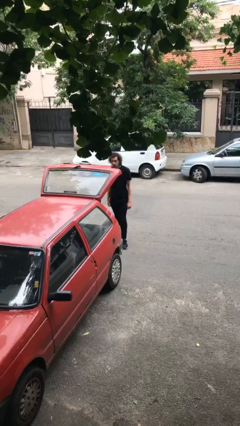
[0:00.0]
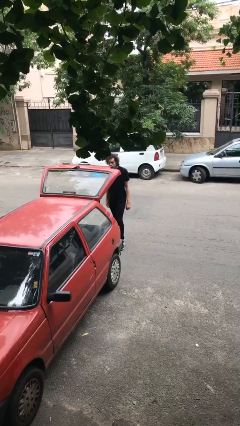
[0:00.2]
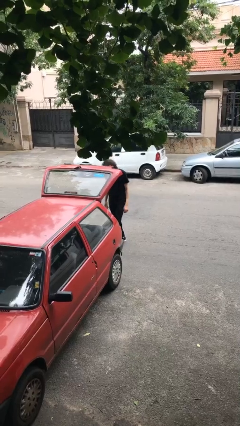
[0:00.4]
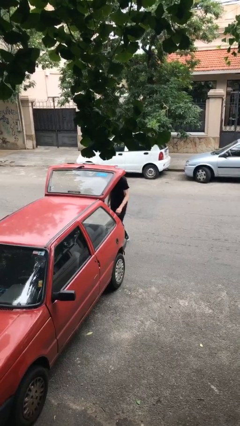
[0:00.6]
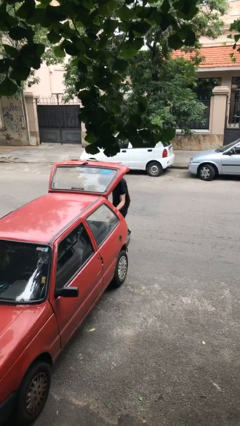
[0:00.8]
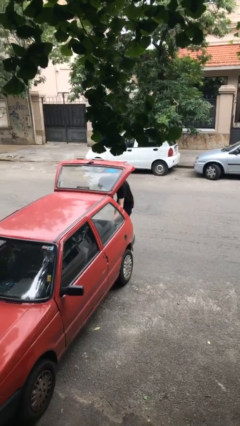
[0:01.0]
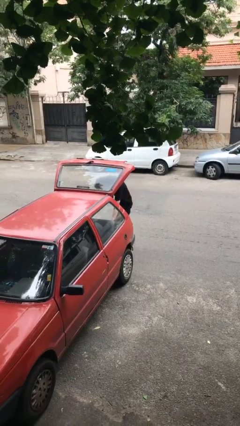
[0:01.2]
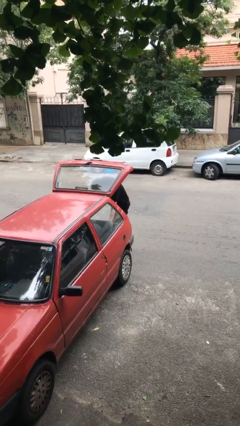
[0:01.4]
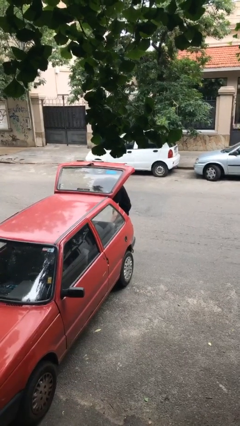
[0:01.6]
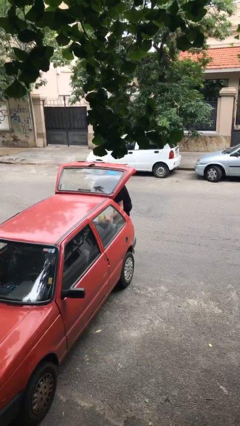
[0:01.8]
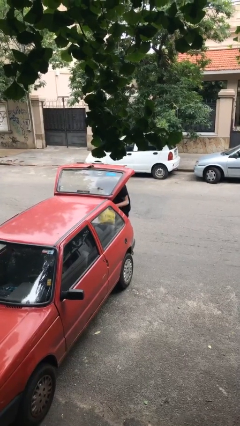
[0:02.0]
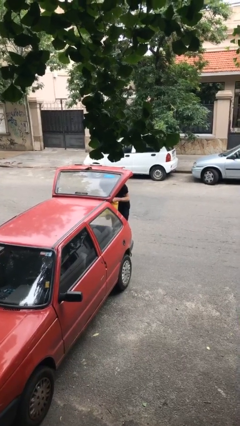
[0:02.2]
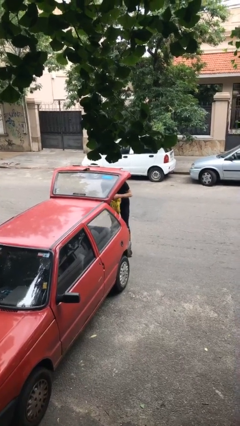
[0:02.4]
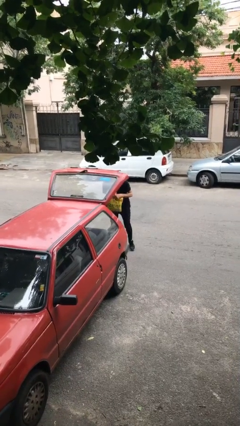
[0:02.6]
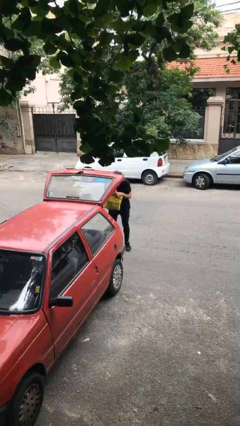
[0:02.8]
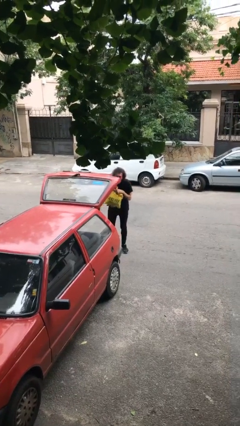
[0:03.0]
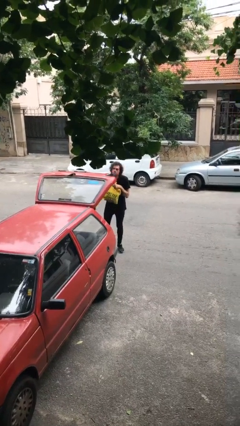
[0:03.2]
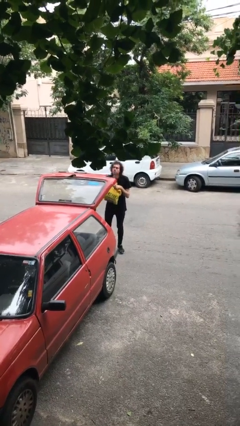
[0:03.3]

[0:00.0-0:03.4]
person unloads car

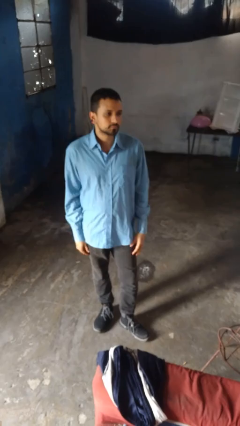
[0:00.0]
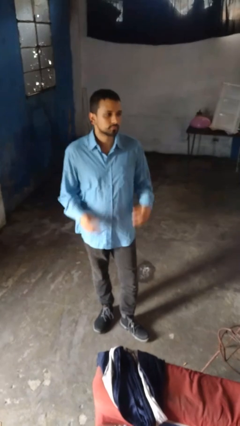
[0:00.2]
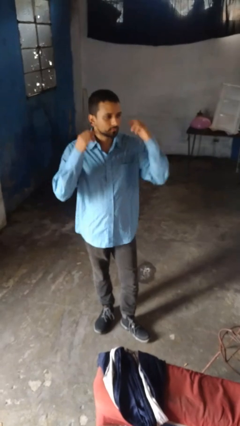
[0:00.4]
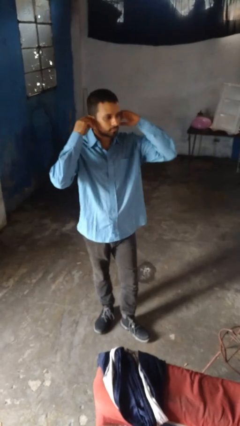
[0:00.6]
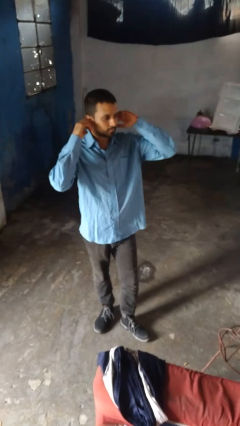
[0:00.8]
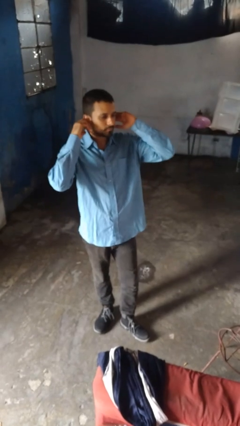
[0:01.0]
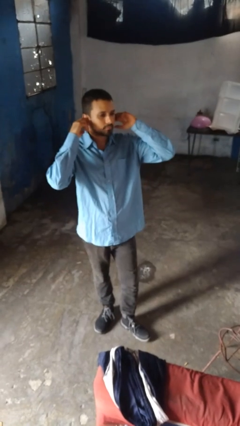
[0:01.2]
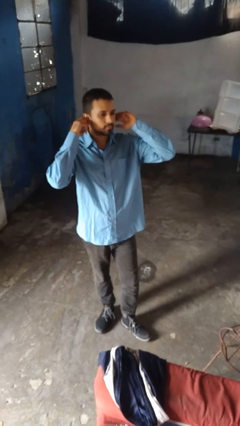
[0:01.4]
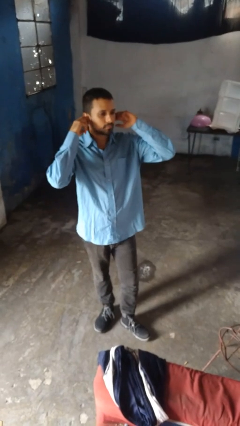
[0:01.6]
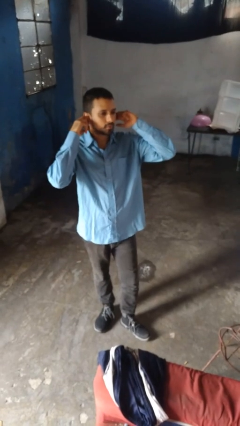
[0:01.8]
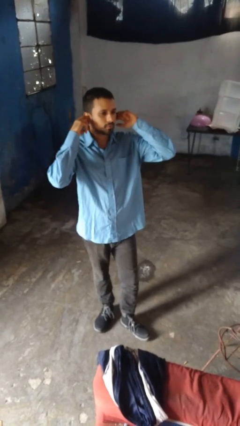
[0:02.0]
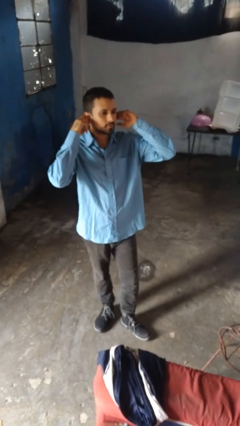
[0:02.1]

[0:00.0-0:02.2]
person puts fingers in ear

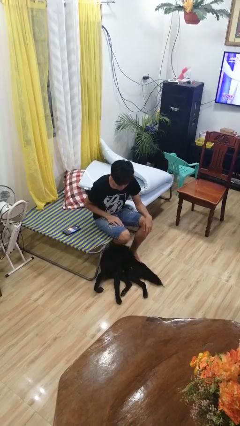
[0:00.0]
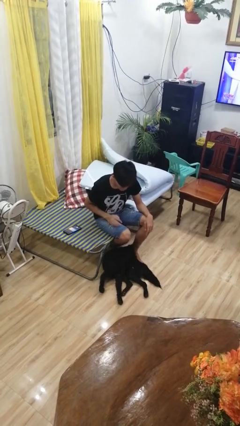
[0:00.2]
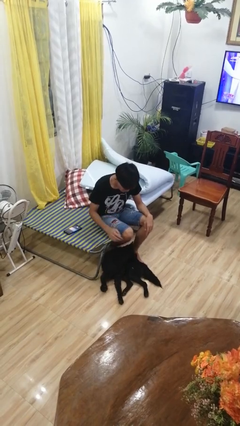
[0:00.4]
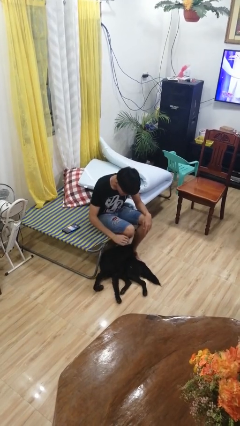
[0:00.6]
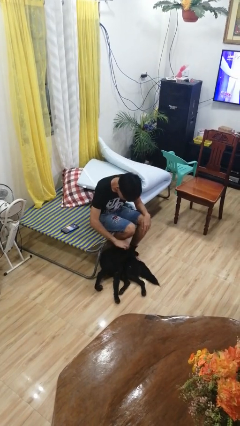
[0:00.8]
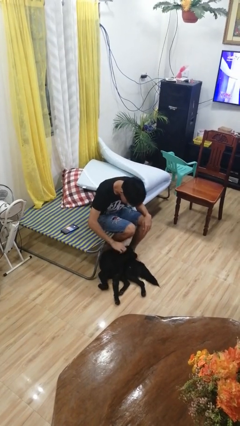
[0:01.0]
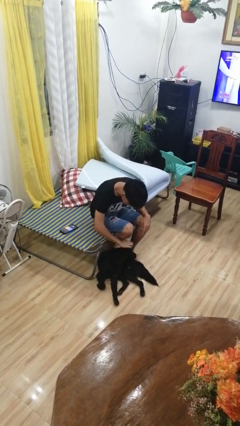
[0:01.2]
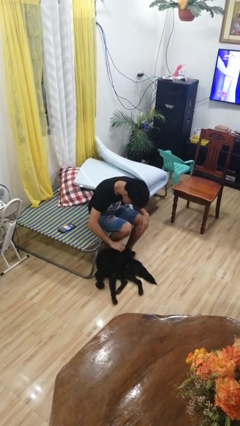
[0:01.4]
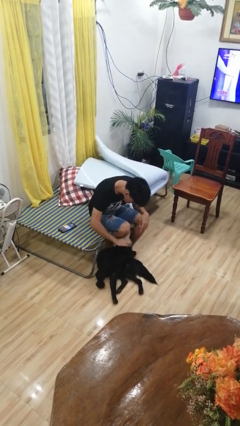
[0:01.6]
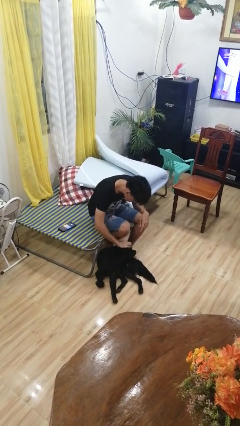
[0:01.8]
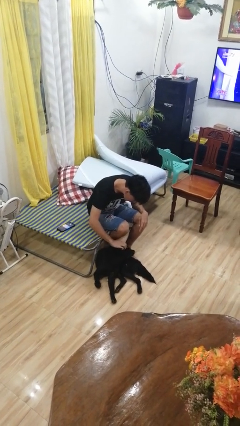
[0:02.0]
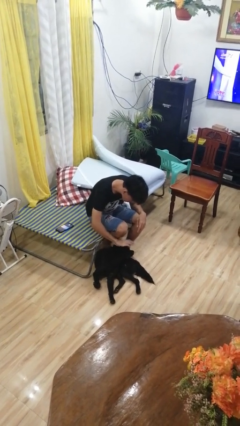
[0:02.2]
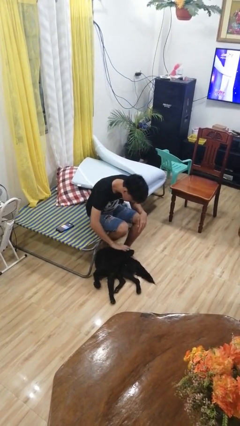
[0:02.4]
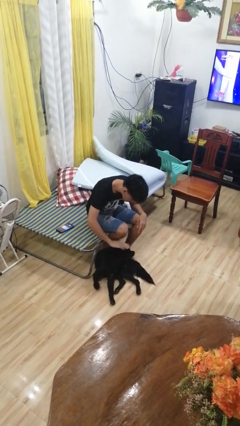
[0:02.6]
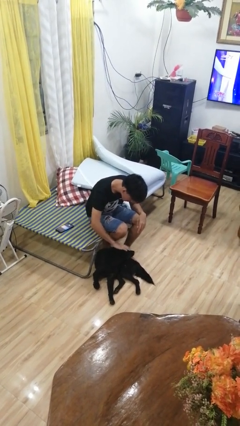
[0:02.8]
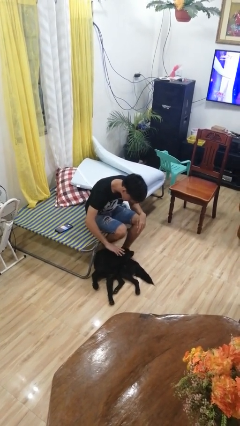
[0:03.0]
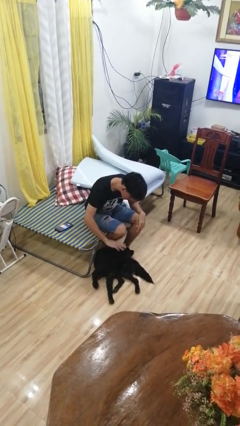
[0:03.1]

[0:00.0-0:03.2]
person pets dog

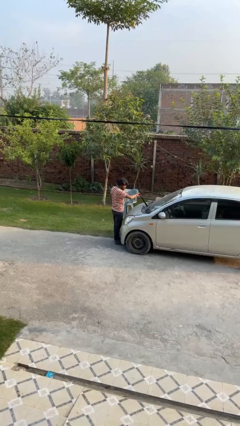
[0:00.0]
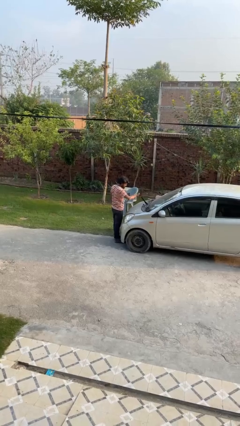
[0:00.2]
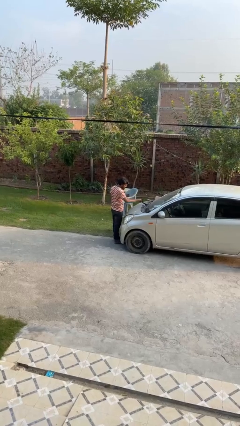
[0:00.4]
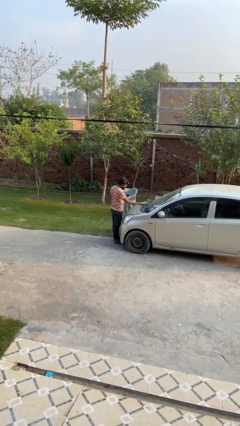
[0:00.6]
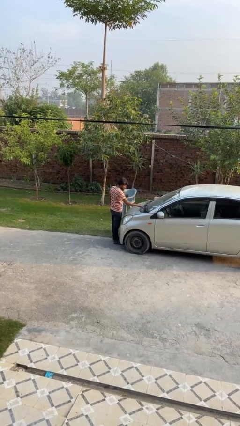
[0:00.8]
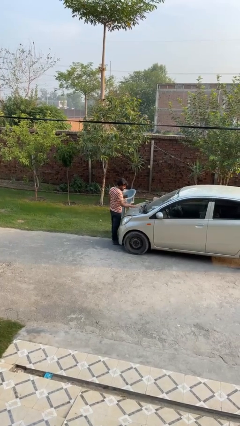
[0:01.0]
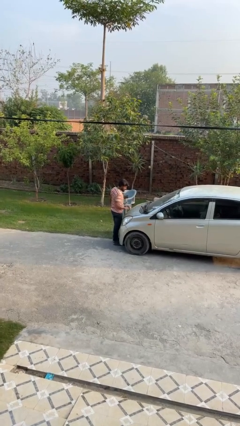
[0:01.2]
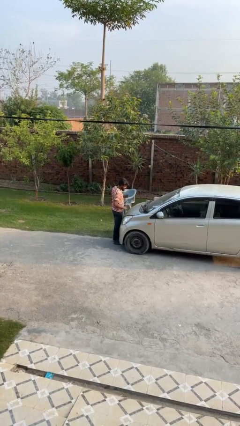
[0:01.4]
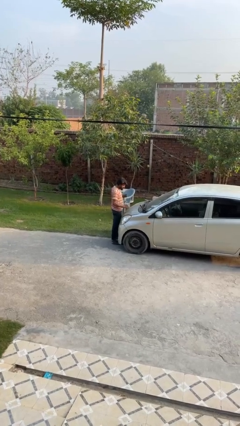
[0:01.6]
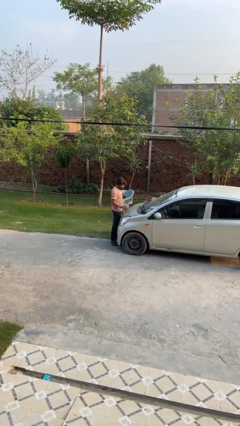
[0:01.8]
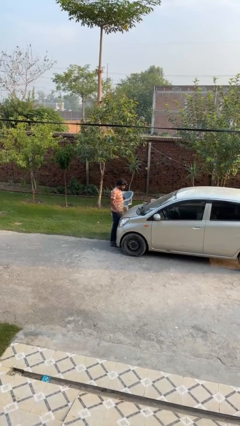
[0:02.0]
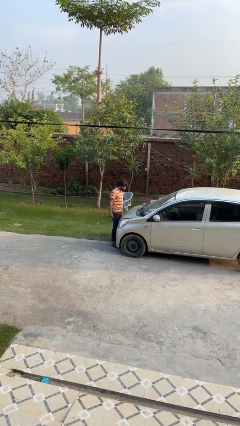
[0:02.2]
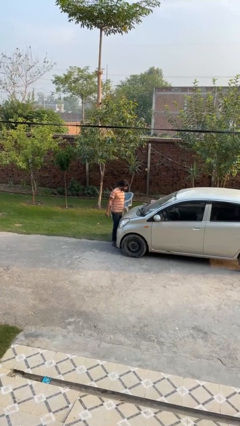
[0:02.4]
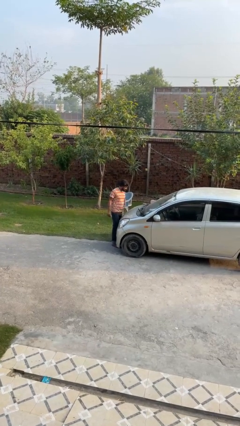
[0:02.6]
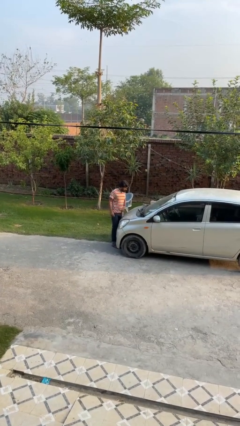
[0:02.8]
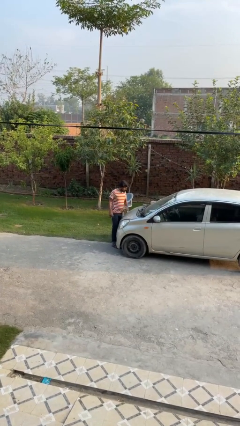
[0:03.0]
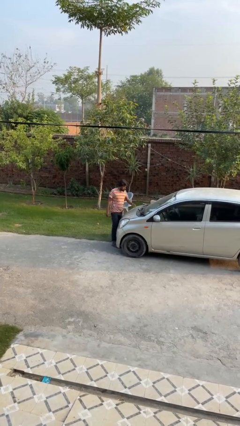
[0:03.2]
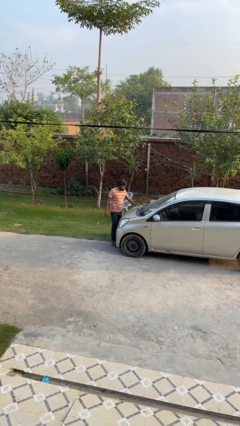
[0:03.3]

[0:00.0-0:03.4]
person flips down car wipers

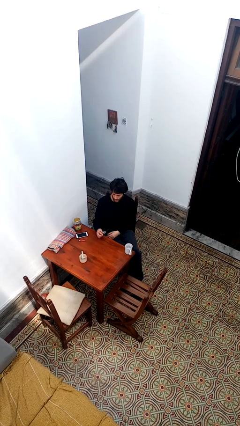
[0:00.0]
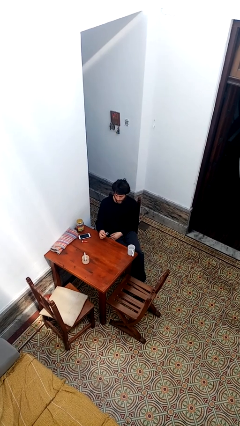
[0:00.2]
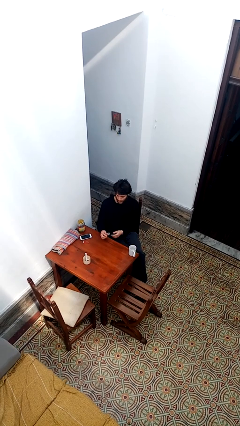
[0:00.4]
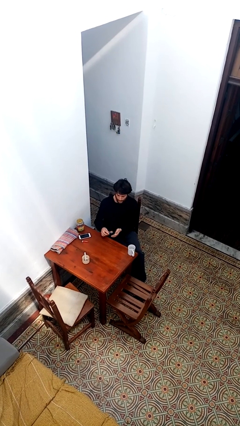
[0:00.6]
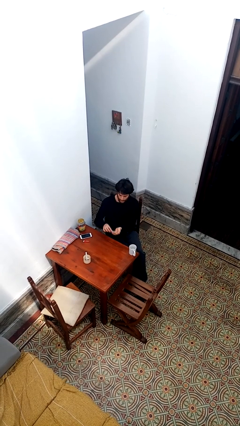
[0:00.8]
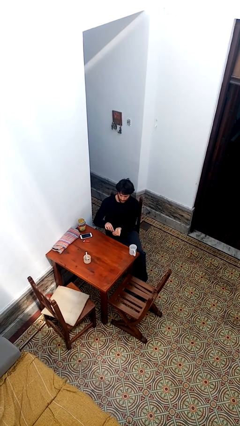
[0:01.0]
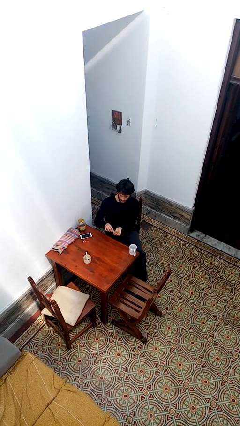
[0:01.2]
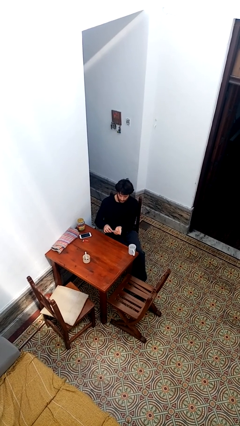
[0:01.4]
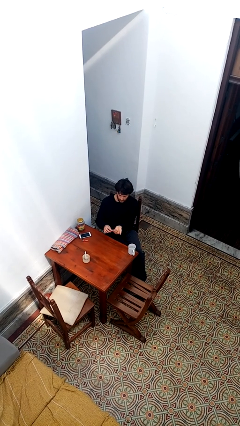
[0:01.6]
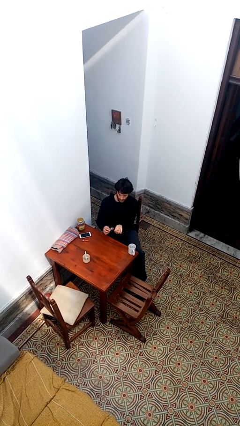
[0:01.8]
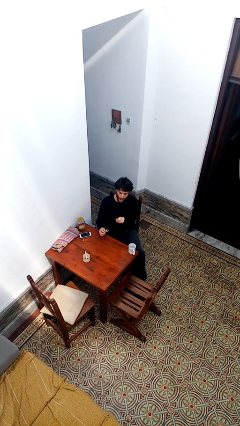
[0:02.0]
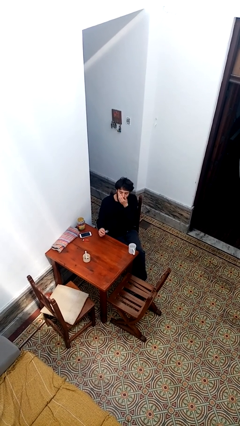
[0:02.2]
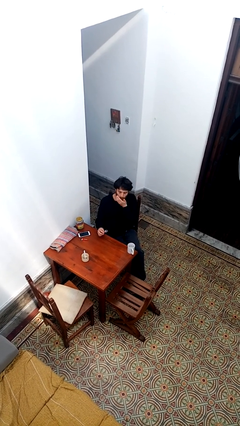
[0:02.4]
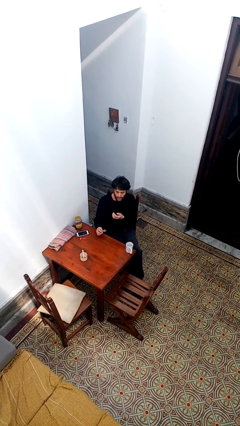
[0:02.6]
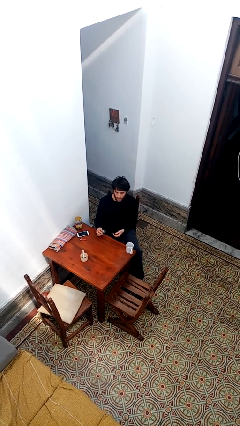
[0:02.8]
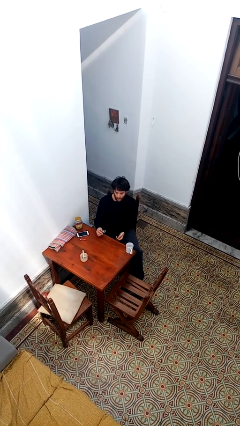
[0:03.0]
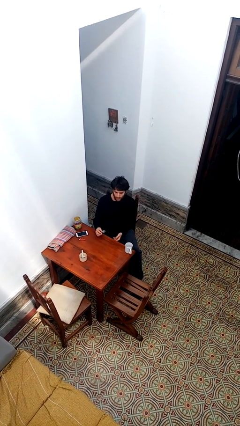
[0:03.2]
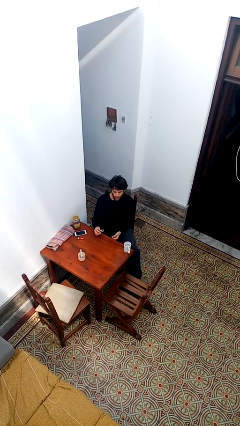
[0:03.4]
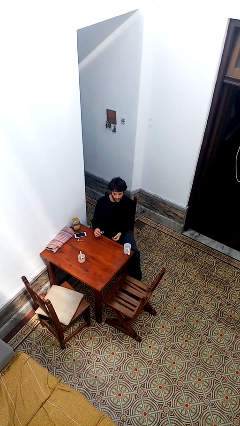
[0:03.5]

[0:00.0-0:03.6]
person takes medicine pills

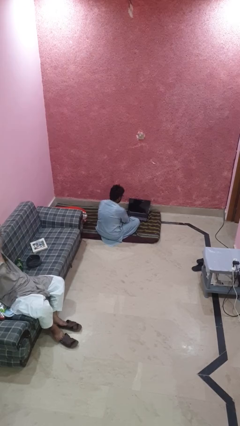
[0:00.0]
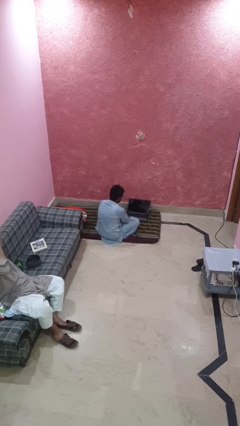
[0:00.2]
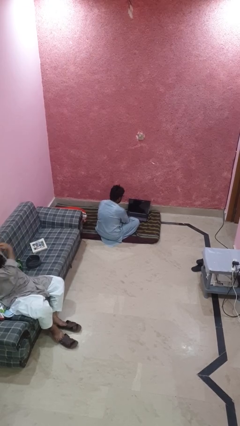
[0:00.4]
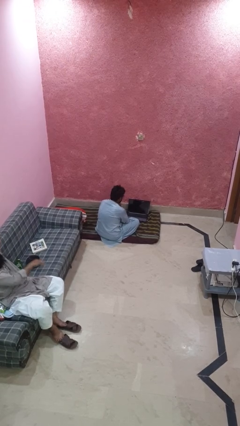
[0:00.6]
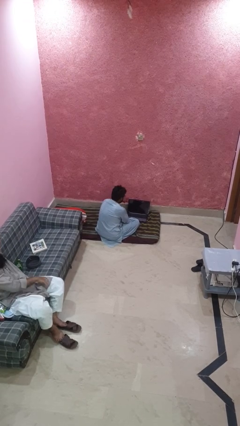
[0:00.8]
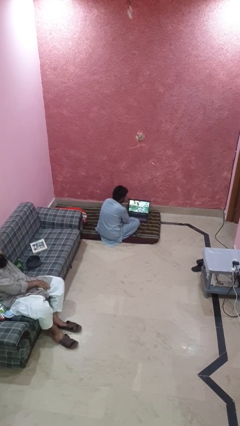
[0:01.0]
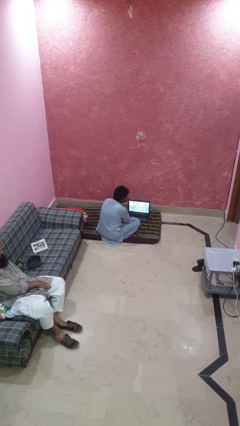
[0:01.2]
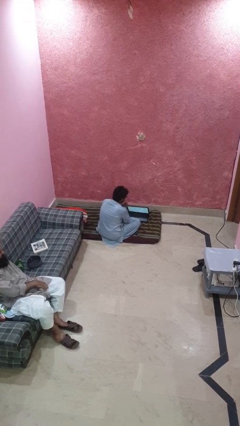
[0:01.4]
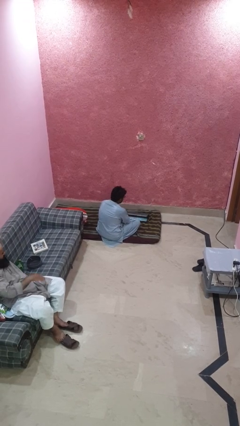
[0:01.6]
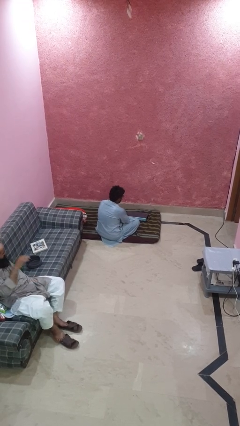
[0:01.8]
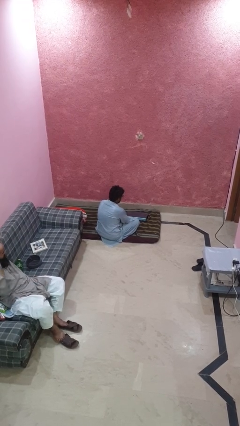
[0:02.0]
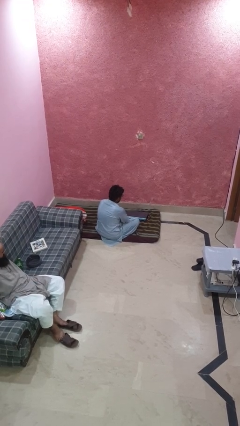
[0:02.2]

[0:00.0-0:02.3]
person closes laptop
